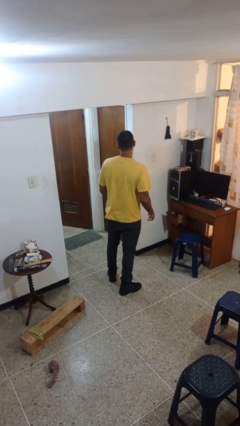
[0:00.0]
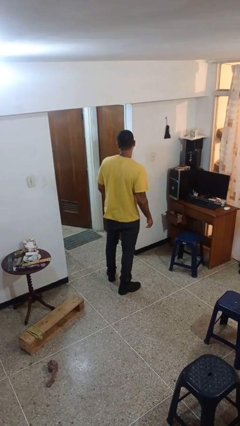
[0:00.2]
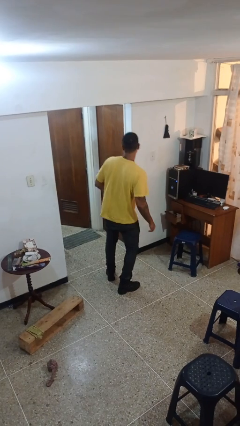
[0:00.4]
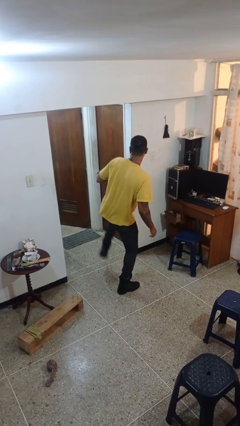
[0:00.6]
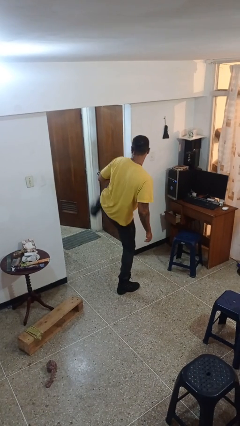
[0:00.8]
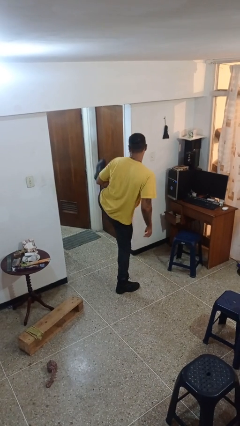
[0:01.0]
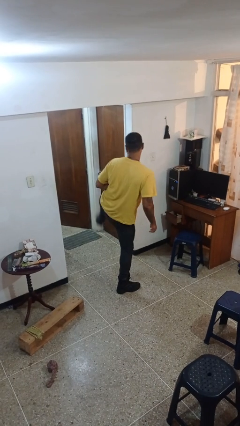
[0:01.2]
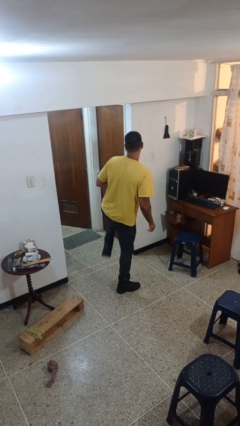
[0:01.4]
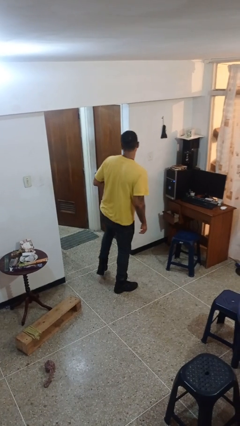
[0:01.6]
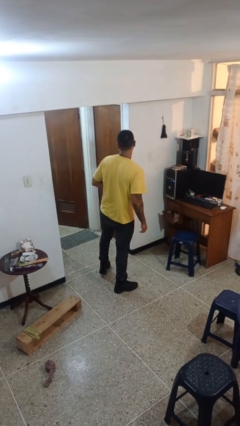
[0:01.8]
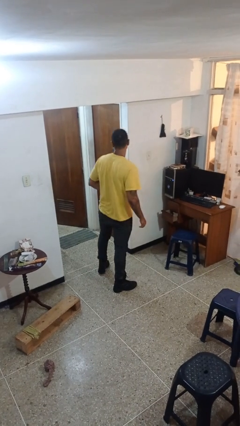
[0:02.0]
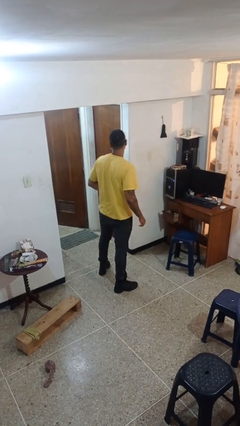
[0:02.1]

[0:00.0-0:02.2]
person karate kicks

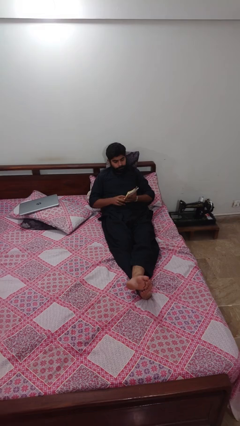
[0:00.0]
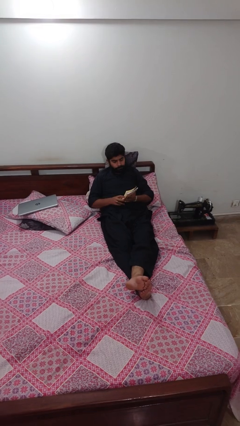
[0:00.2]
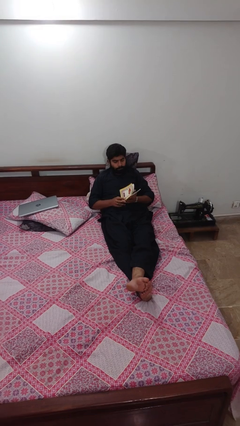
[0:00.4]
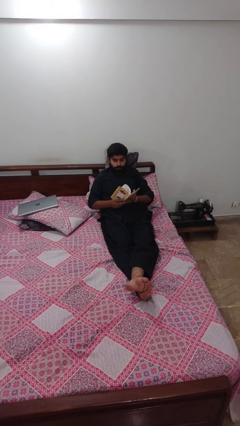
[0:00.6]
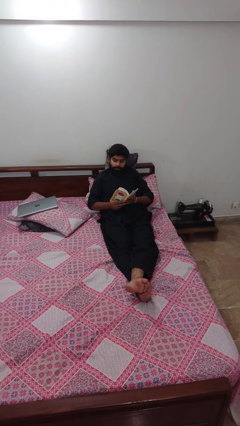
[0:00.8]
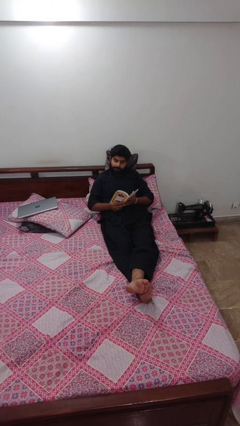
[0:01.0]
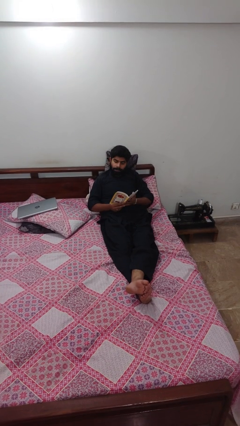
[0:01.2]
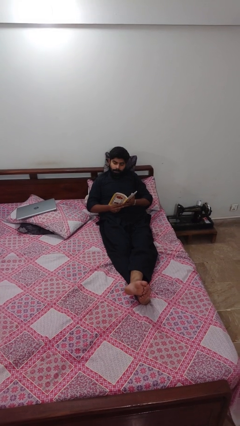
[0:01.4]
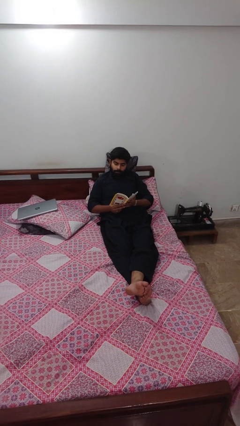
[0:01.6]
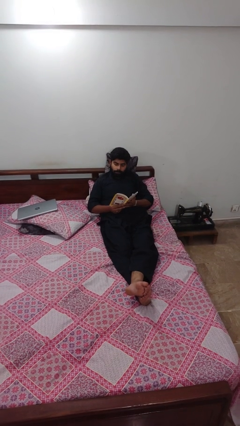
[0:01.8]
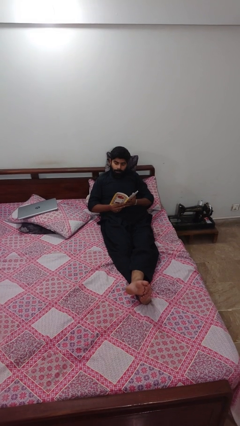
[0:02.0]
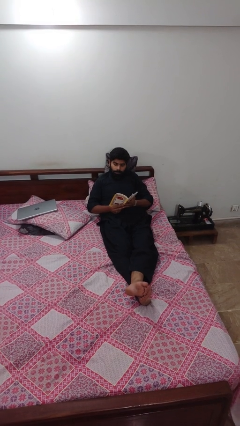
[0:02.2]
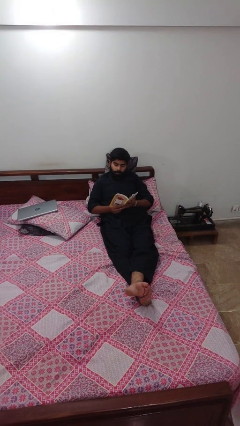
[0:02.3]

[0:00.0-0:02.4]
person reads book

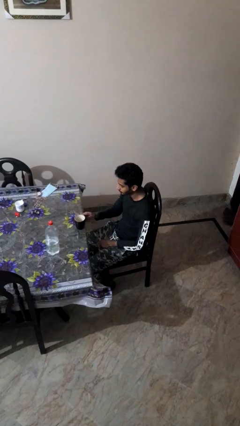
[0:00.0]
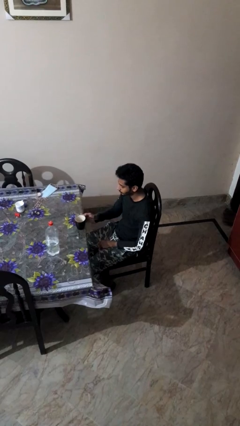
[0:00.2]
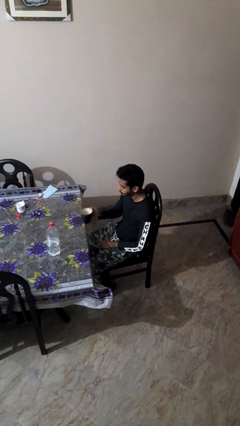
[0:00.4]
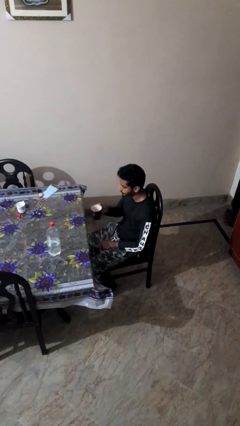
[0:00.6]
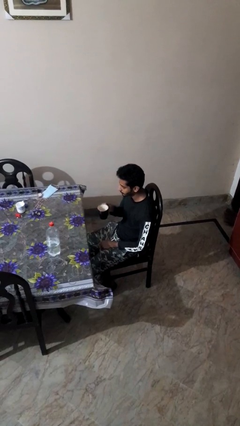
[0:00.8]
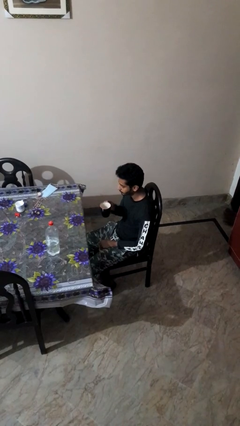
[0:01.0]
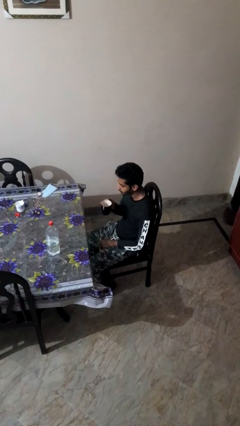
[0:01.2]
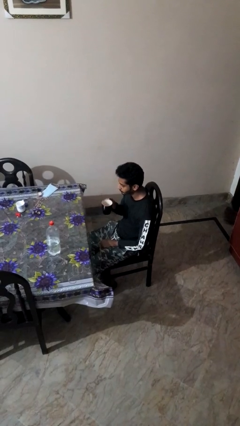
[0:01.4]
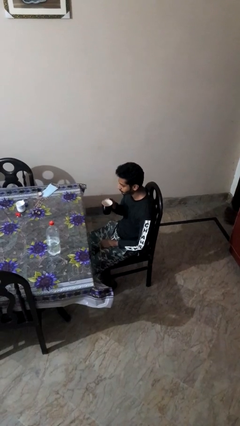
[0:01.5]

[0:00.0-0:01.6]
person picks up object from table

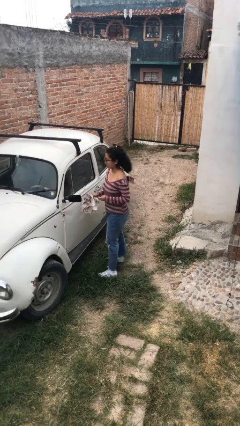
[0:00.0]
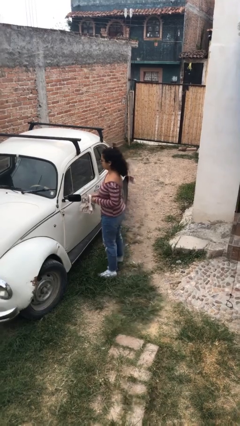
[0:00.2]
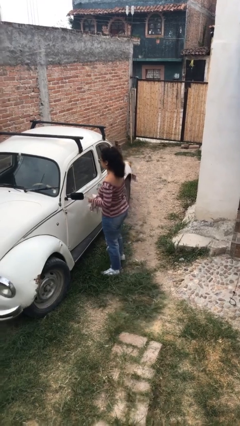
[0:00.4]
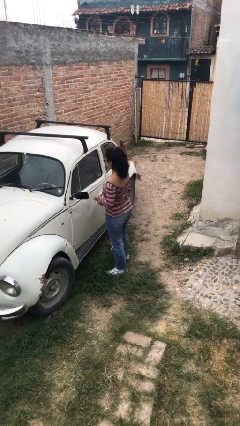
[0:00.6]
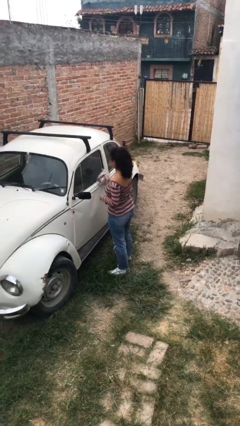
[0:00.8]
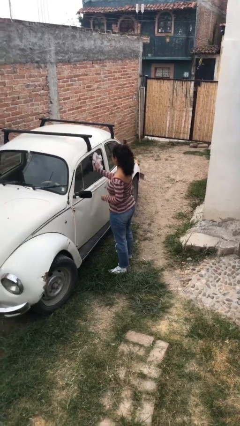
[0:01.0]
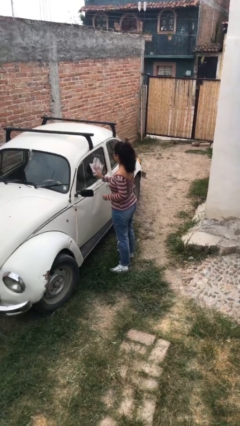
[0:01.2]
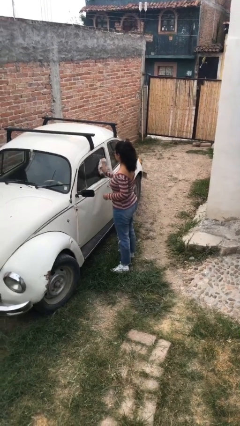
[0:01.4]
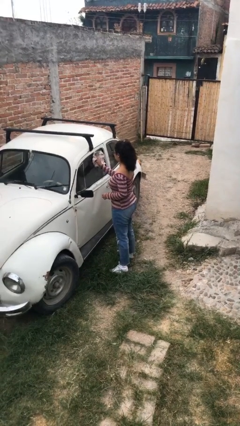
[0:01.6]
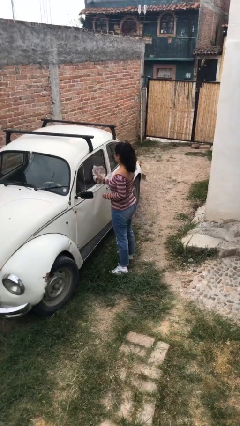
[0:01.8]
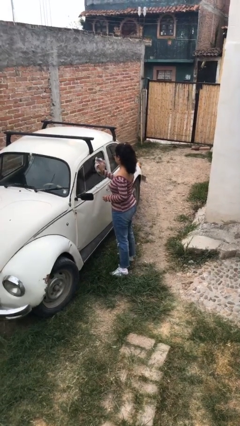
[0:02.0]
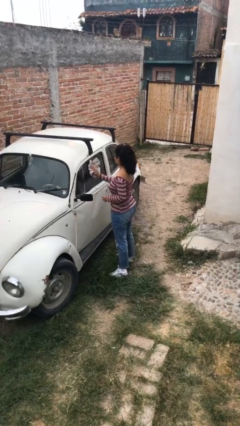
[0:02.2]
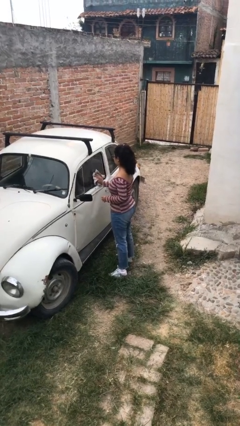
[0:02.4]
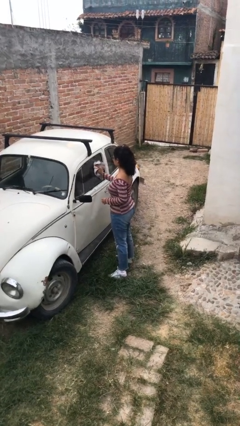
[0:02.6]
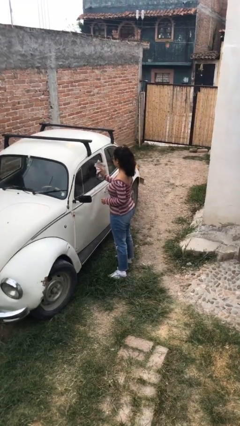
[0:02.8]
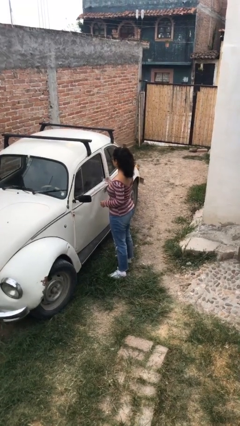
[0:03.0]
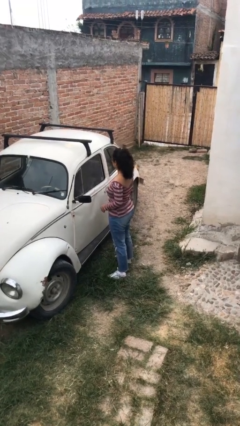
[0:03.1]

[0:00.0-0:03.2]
person polishes car with rag

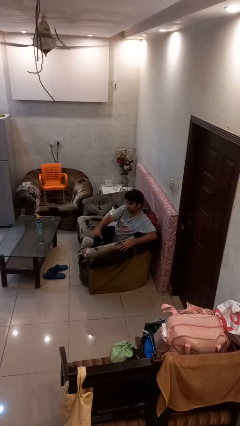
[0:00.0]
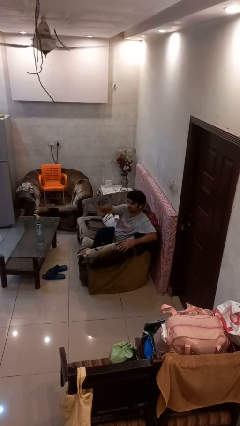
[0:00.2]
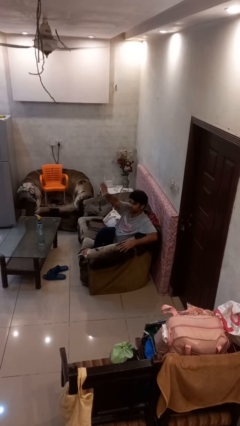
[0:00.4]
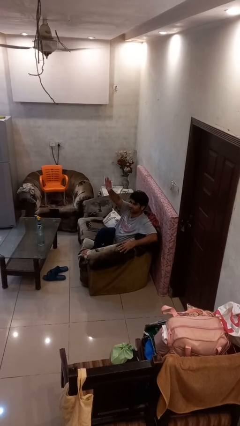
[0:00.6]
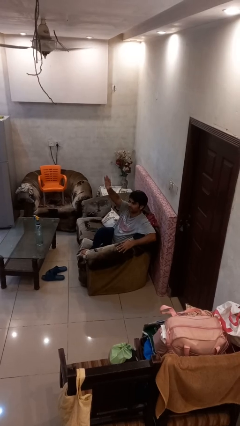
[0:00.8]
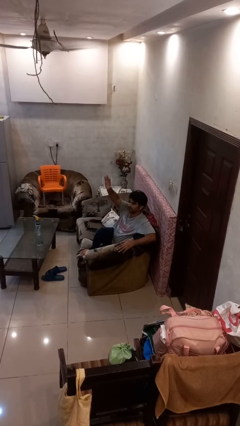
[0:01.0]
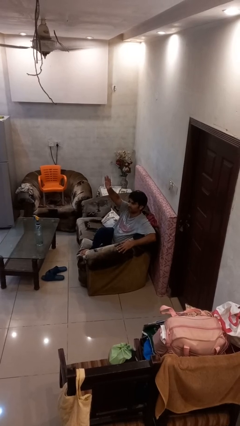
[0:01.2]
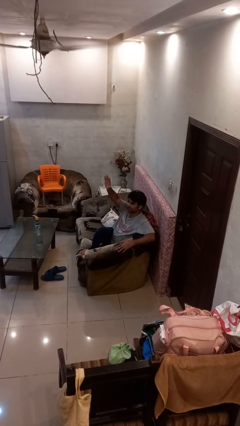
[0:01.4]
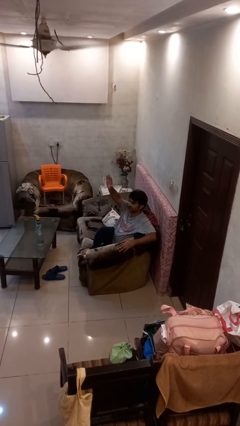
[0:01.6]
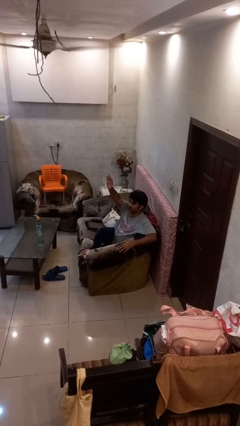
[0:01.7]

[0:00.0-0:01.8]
person gestures raise hand

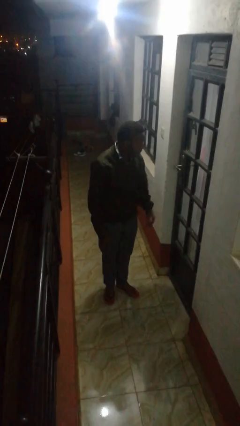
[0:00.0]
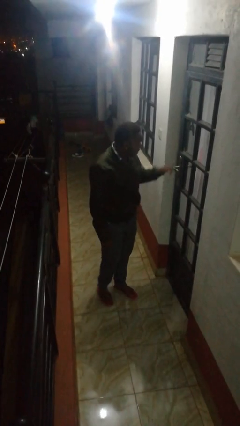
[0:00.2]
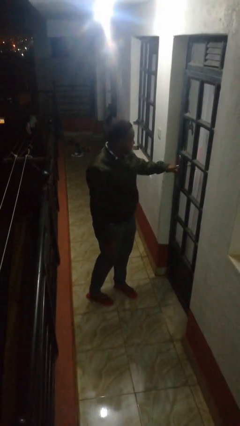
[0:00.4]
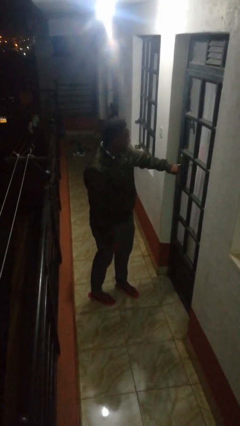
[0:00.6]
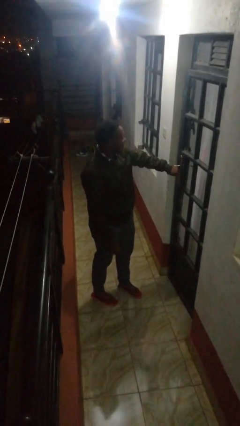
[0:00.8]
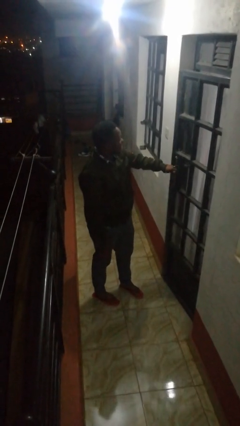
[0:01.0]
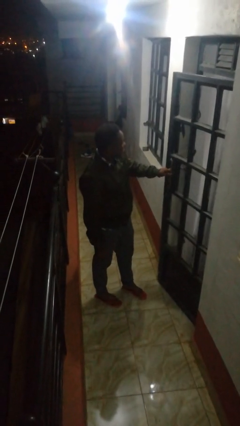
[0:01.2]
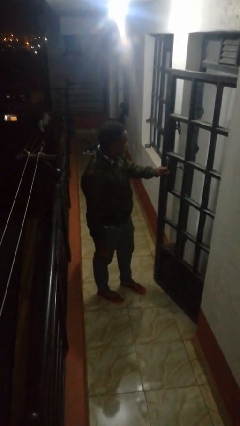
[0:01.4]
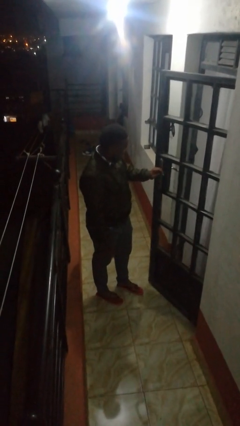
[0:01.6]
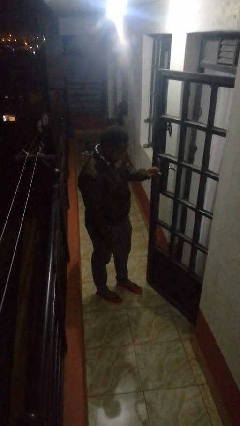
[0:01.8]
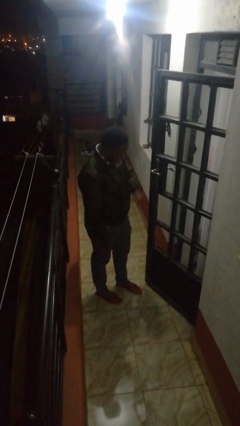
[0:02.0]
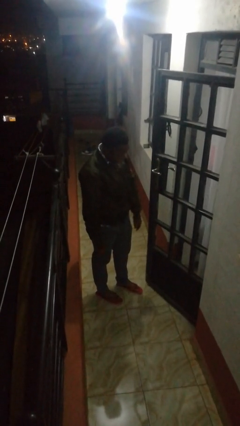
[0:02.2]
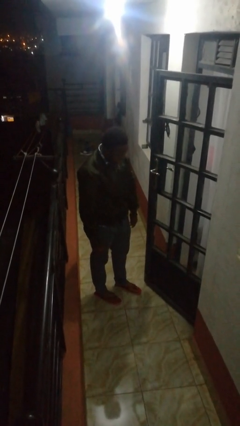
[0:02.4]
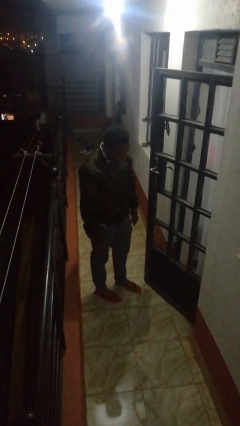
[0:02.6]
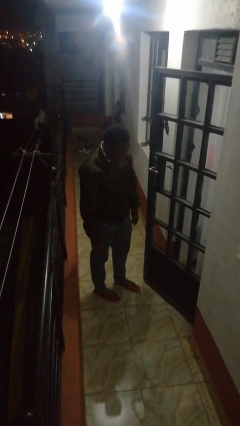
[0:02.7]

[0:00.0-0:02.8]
person opens facility door

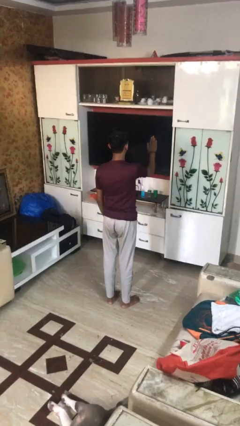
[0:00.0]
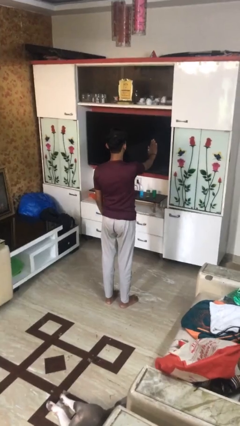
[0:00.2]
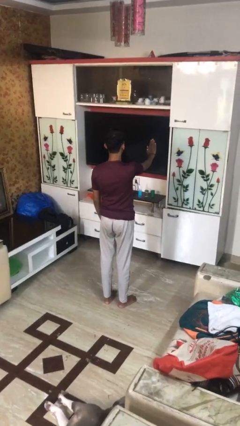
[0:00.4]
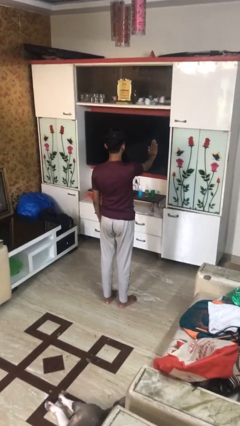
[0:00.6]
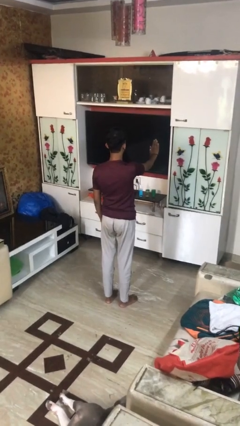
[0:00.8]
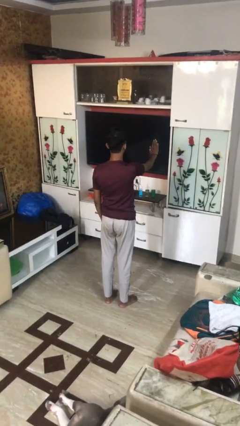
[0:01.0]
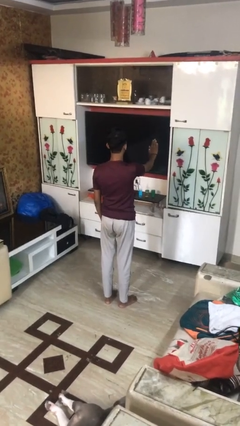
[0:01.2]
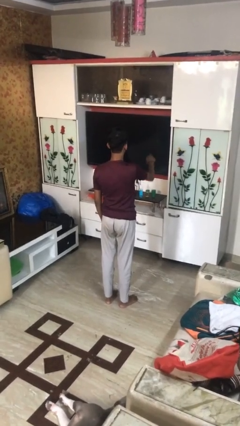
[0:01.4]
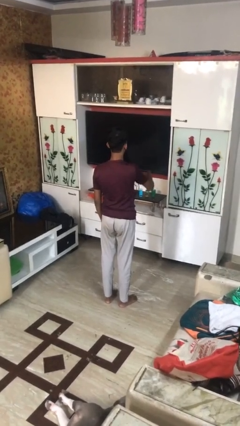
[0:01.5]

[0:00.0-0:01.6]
person gestures stop

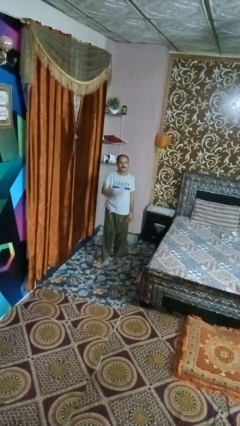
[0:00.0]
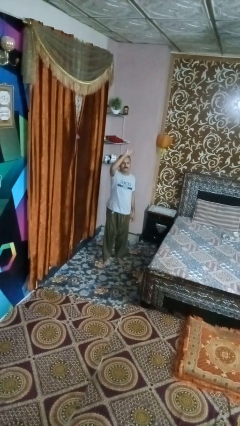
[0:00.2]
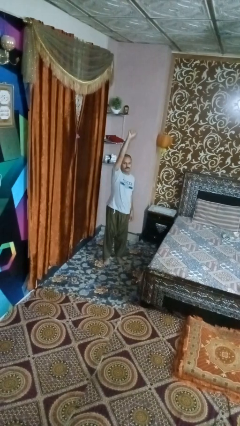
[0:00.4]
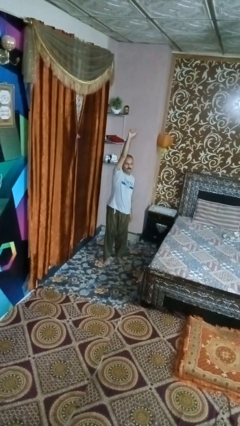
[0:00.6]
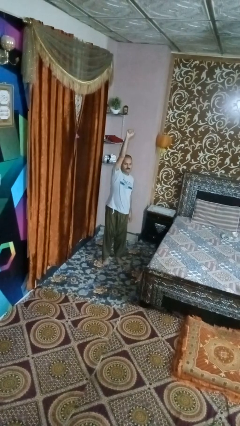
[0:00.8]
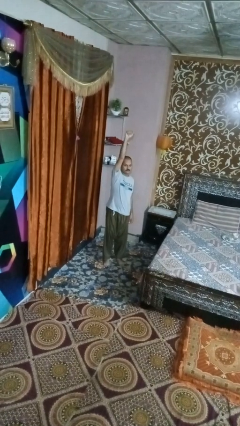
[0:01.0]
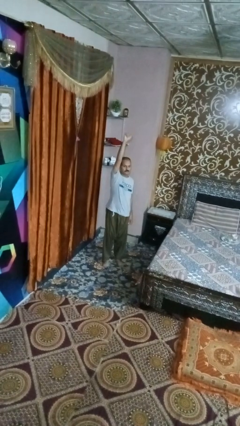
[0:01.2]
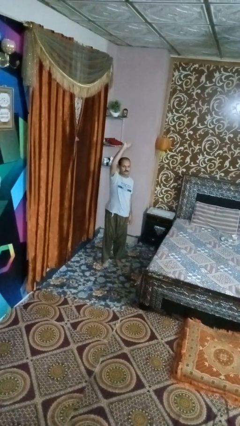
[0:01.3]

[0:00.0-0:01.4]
person punches
